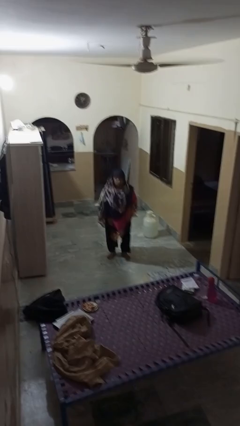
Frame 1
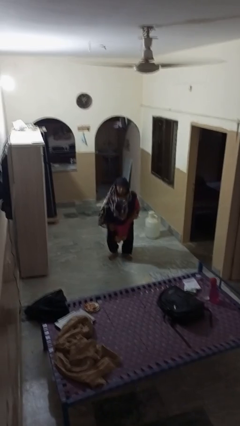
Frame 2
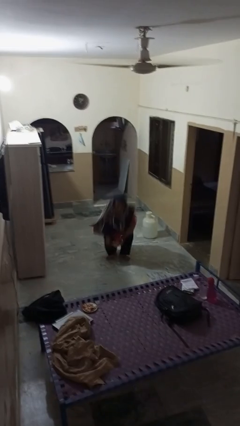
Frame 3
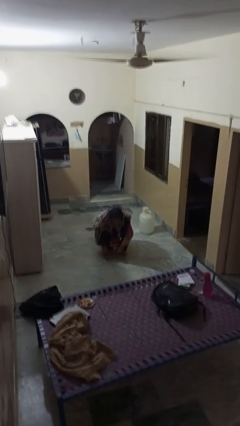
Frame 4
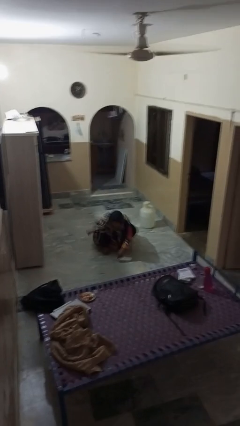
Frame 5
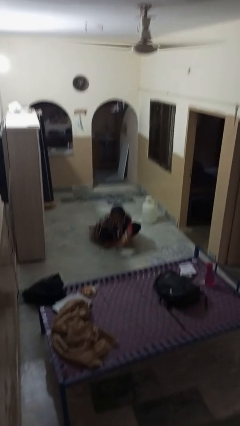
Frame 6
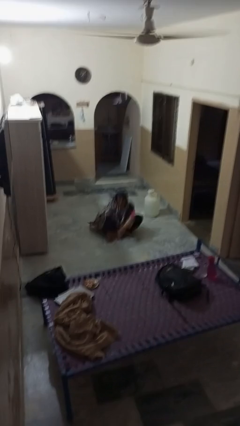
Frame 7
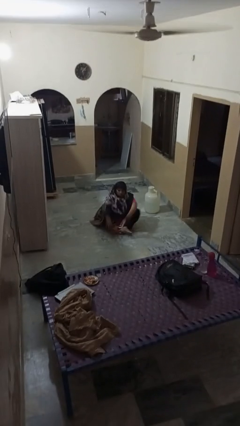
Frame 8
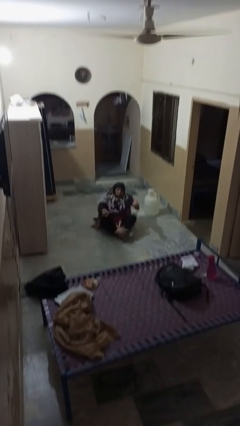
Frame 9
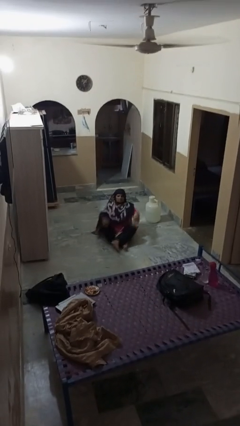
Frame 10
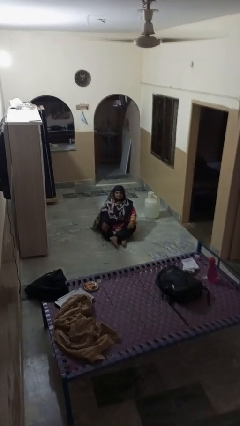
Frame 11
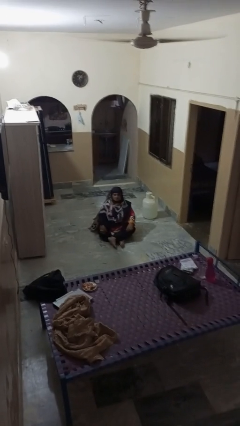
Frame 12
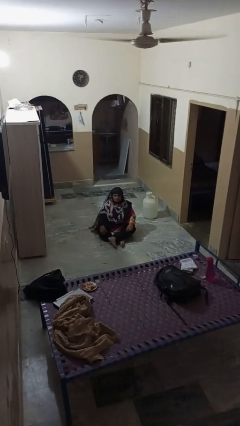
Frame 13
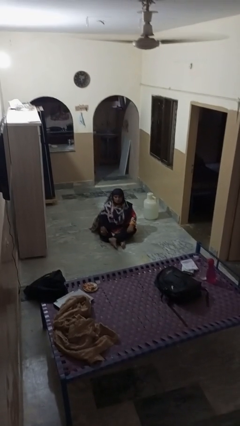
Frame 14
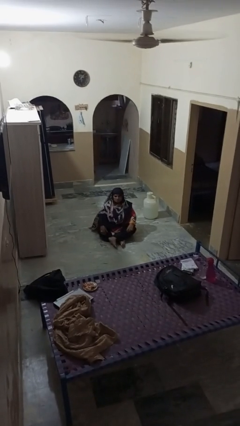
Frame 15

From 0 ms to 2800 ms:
person sits crisscross

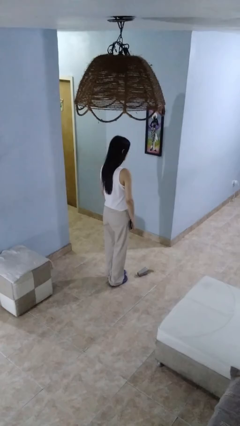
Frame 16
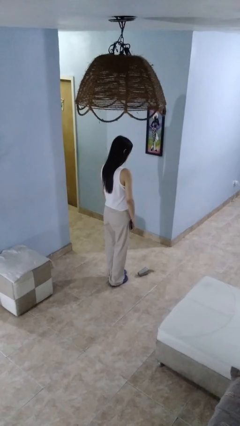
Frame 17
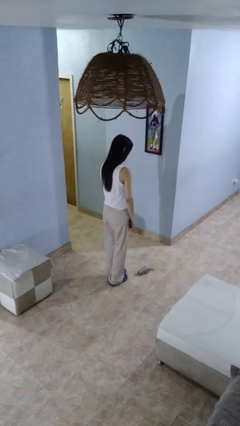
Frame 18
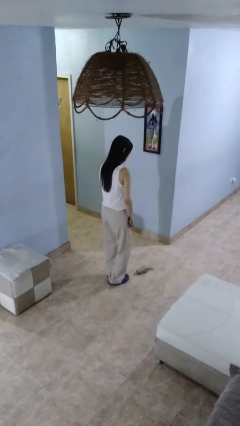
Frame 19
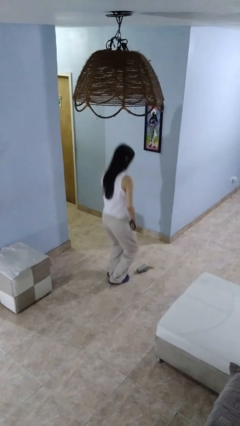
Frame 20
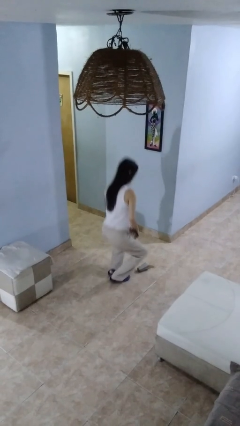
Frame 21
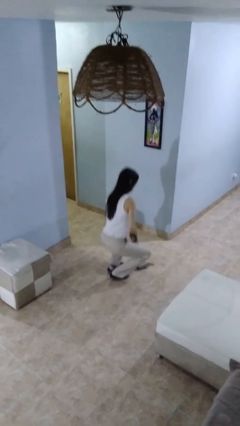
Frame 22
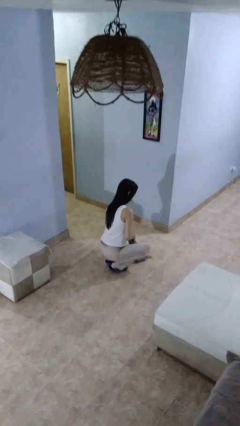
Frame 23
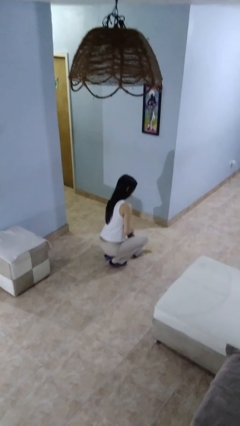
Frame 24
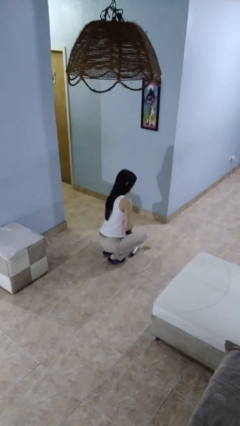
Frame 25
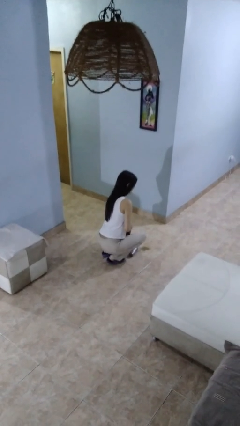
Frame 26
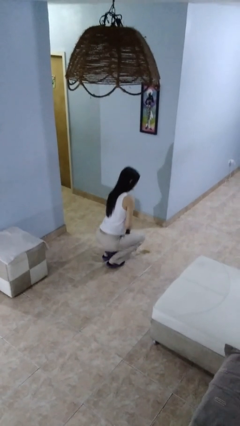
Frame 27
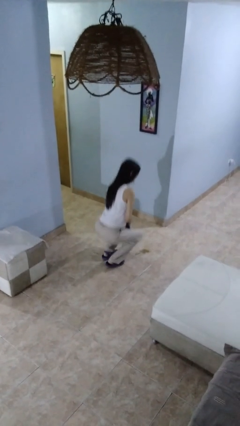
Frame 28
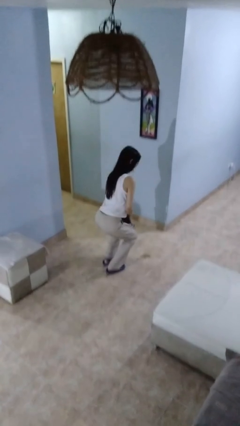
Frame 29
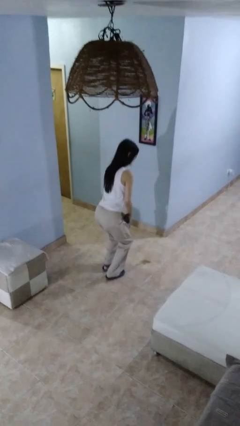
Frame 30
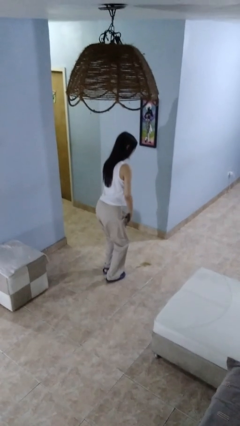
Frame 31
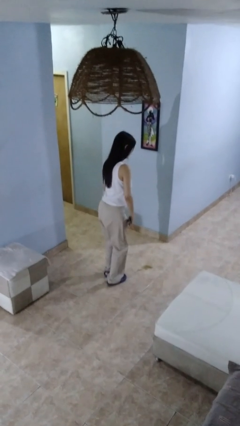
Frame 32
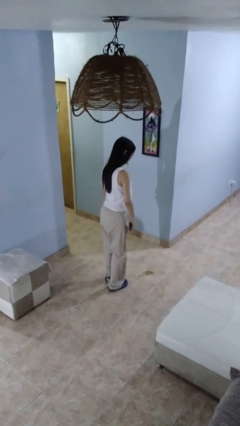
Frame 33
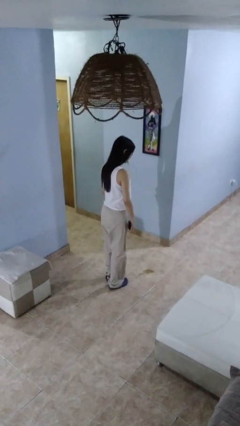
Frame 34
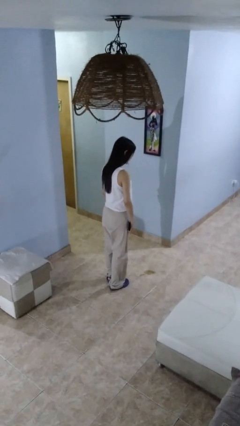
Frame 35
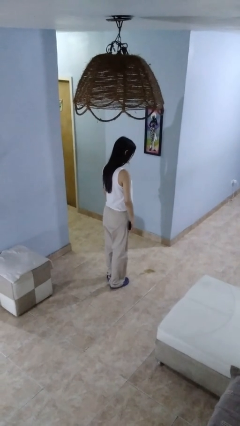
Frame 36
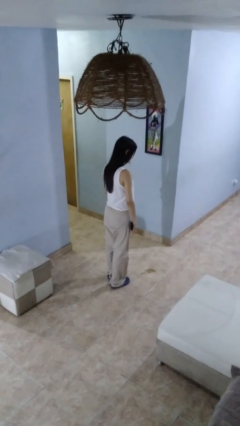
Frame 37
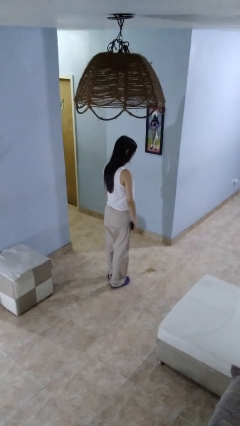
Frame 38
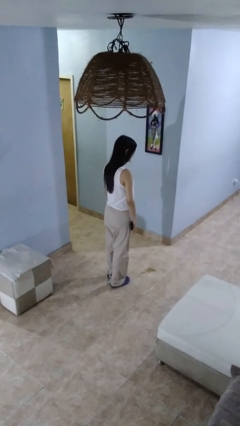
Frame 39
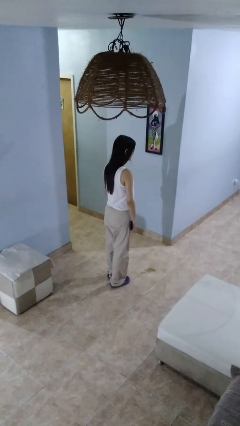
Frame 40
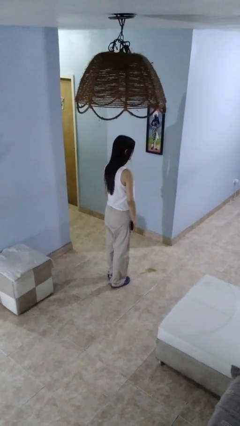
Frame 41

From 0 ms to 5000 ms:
person sets upright glass

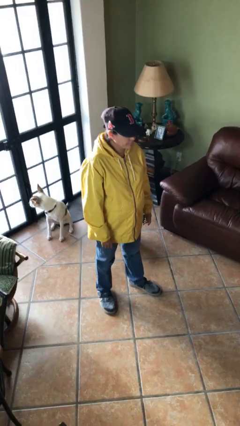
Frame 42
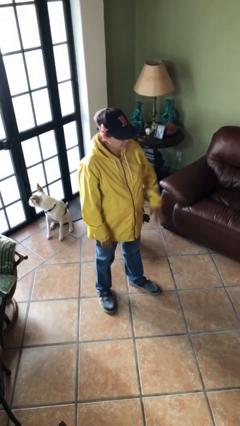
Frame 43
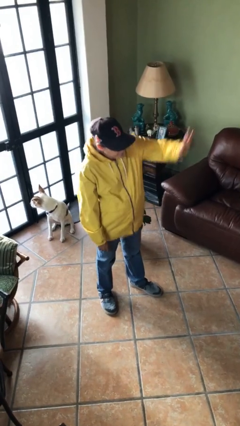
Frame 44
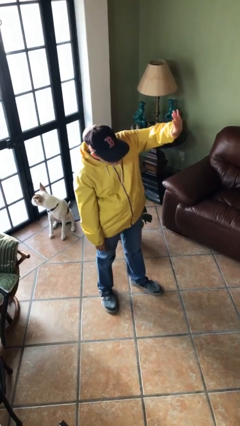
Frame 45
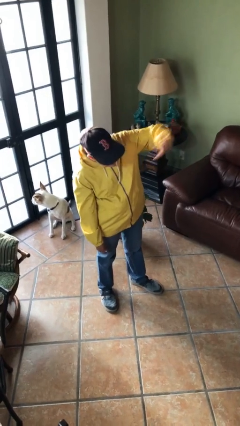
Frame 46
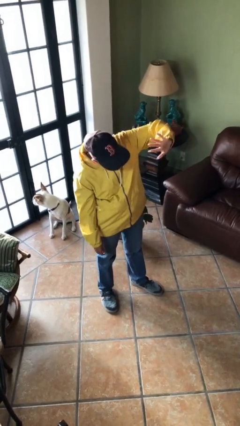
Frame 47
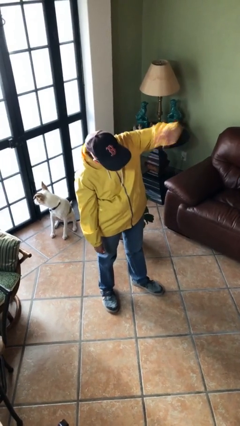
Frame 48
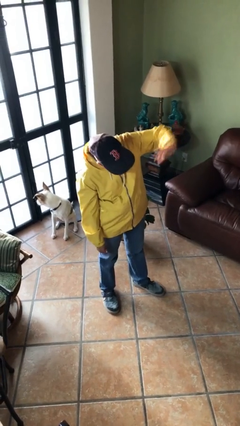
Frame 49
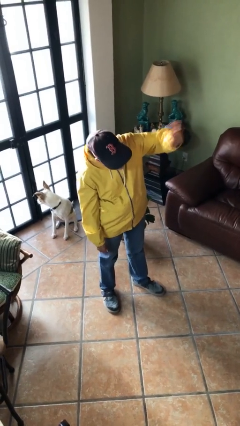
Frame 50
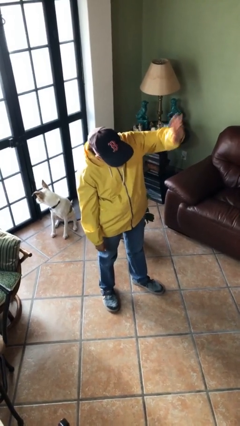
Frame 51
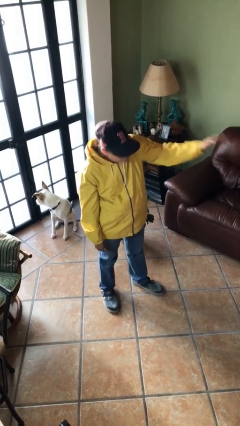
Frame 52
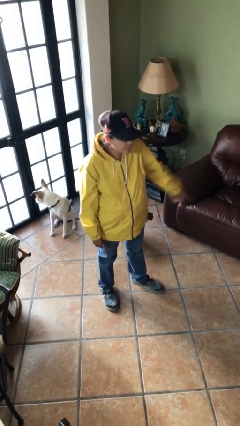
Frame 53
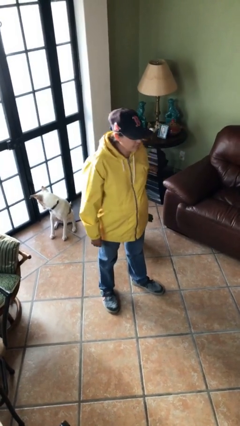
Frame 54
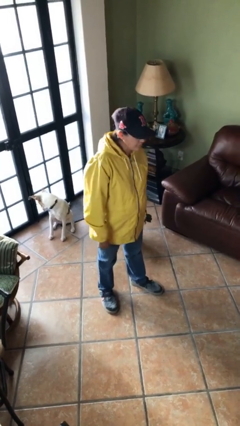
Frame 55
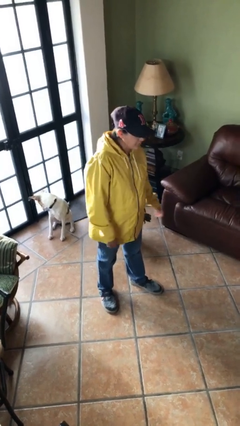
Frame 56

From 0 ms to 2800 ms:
person waves at person

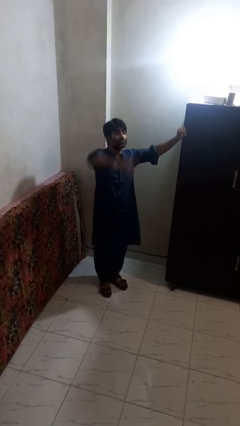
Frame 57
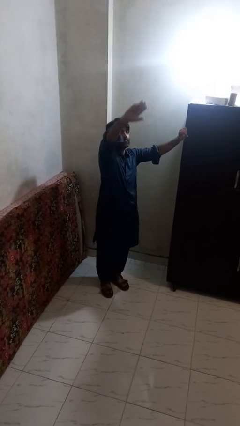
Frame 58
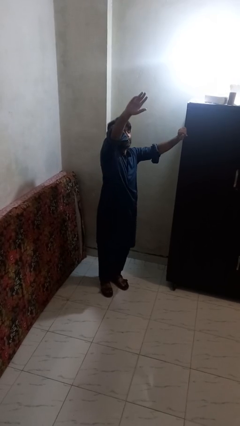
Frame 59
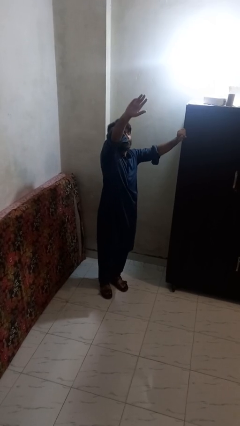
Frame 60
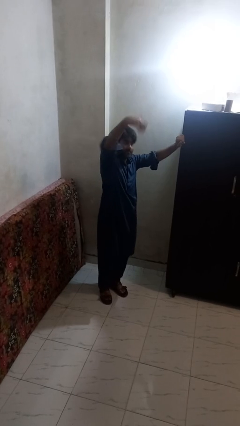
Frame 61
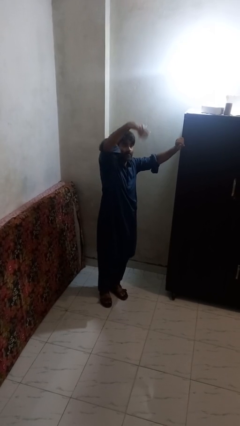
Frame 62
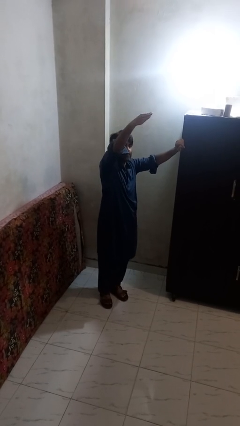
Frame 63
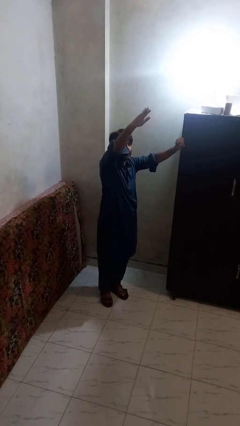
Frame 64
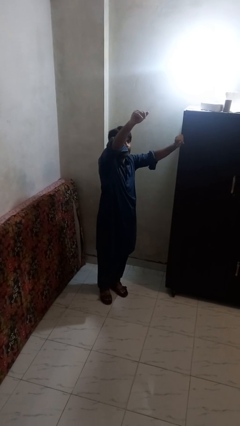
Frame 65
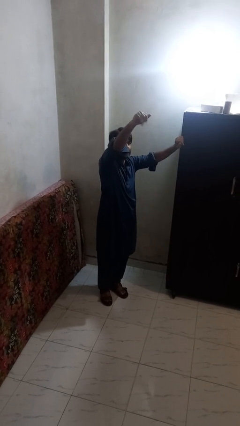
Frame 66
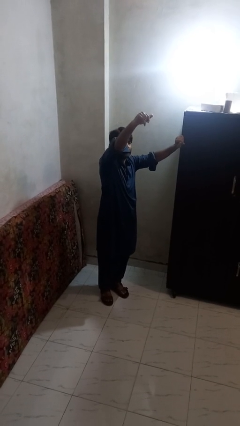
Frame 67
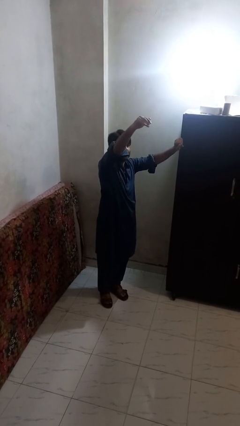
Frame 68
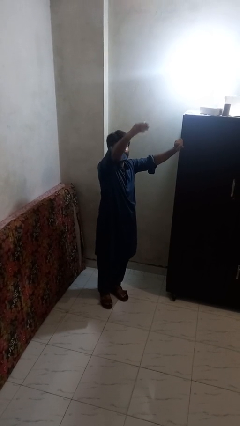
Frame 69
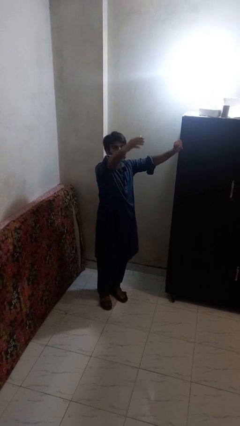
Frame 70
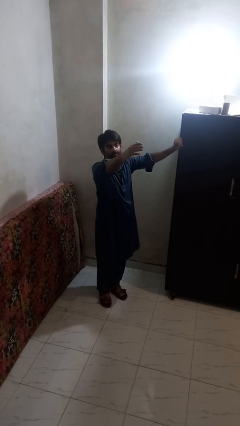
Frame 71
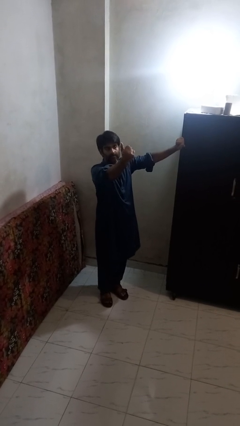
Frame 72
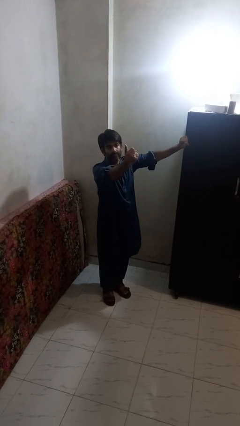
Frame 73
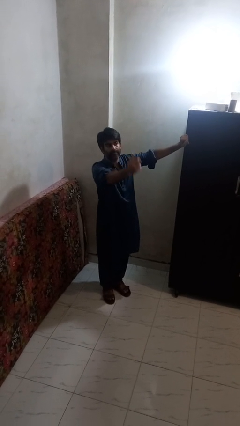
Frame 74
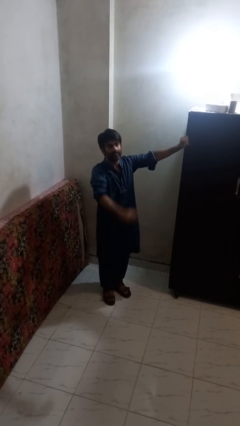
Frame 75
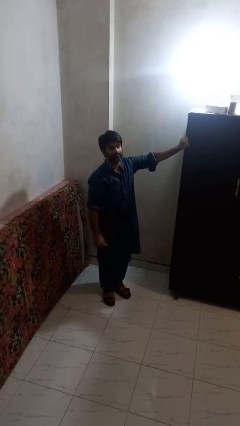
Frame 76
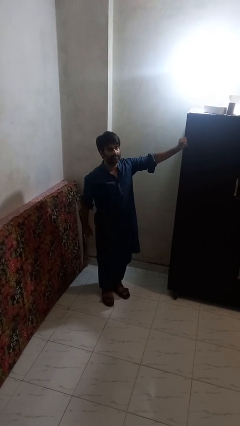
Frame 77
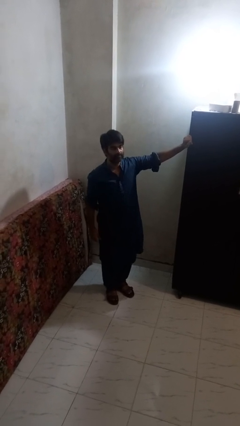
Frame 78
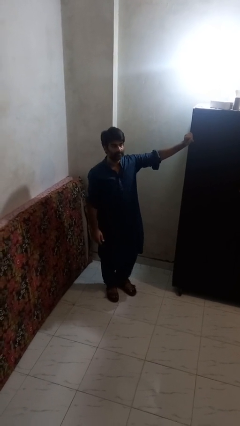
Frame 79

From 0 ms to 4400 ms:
person gestures come here

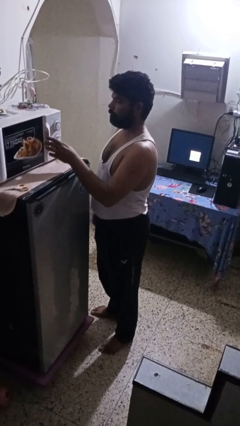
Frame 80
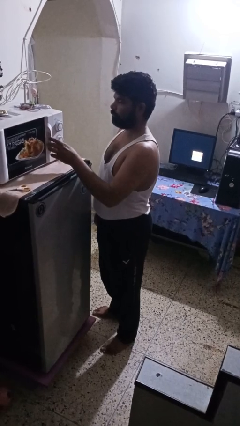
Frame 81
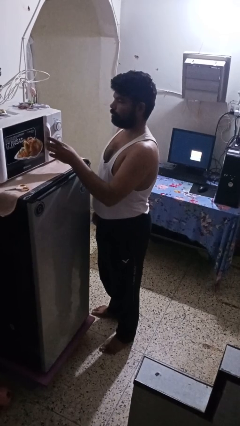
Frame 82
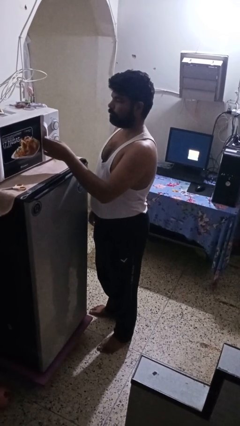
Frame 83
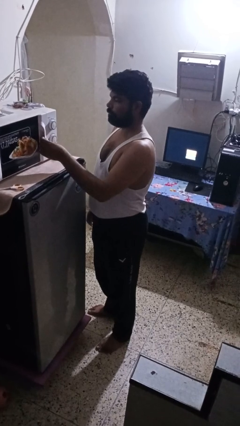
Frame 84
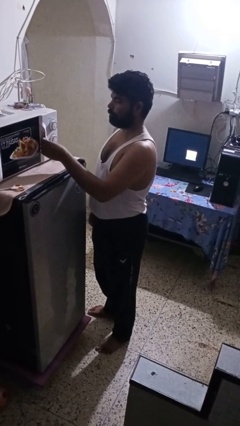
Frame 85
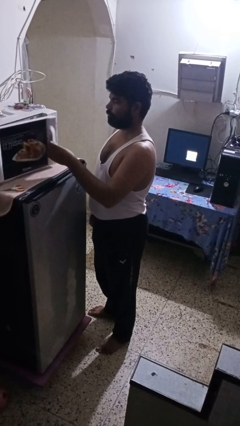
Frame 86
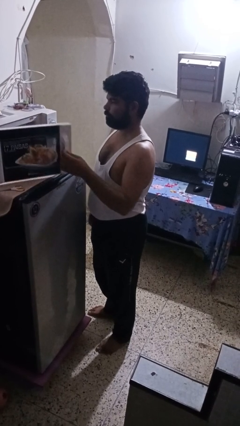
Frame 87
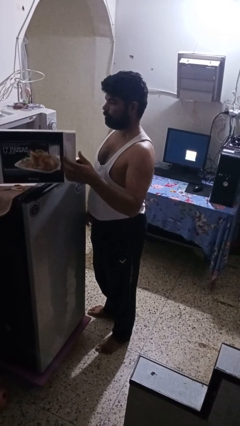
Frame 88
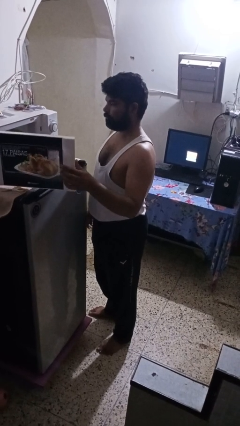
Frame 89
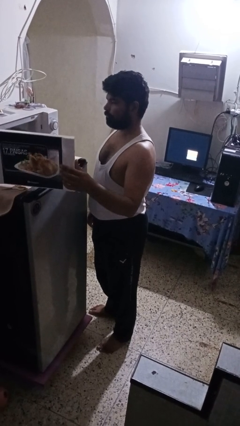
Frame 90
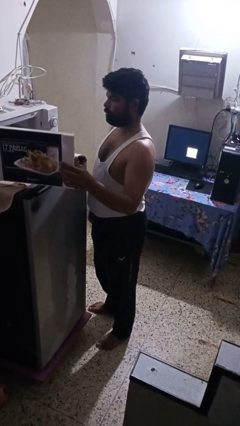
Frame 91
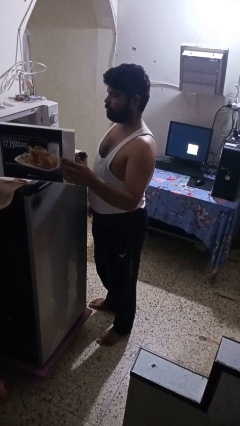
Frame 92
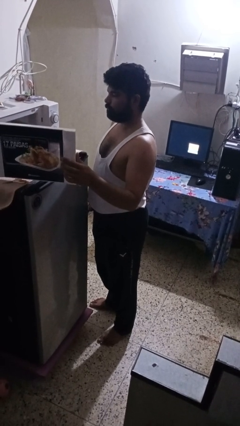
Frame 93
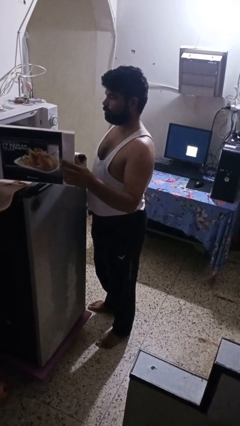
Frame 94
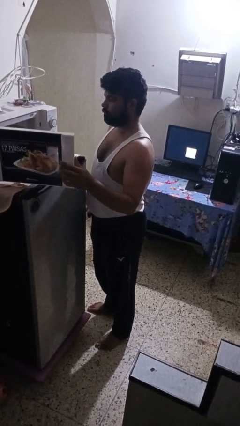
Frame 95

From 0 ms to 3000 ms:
person opens microwave
